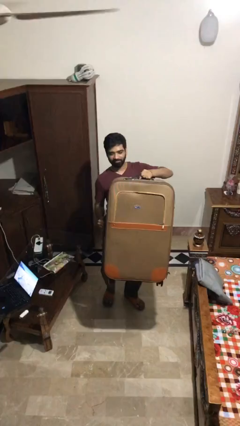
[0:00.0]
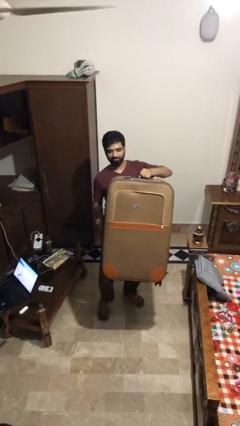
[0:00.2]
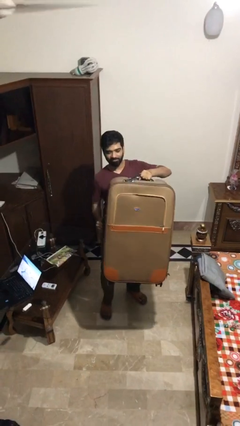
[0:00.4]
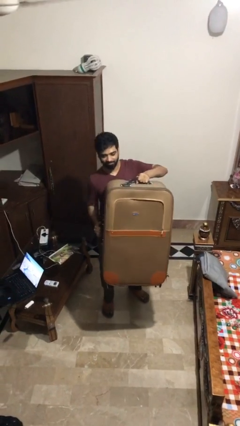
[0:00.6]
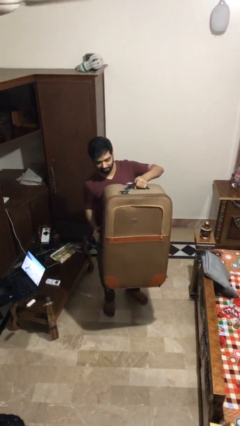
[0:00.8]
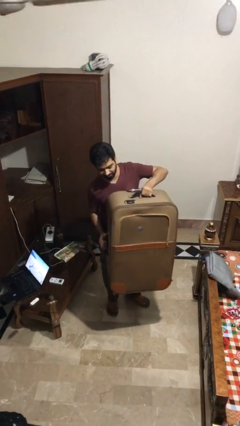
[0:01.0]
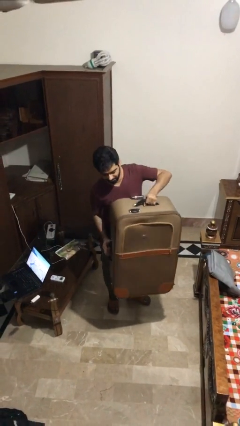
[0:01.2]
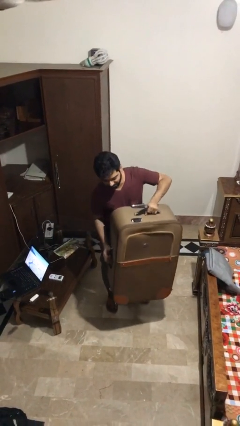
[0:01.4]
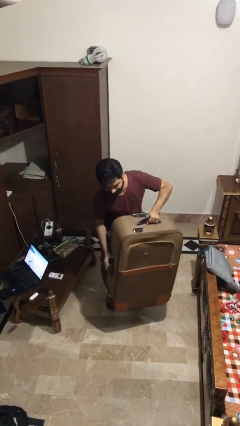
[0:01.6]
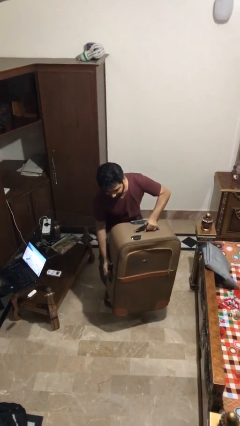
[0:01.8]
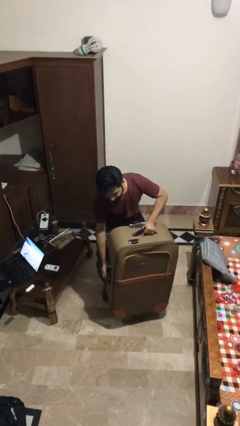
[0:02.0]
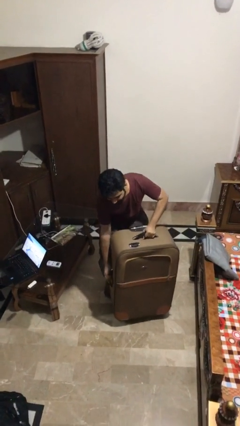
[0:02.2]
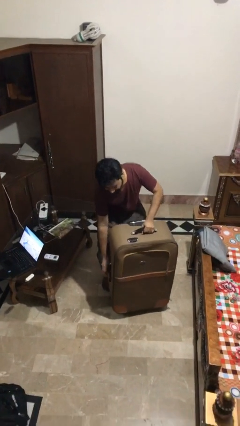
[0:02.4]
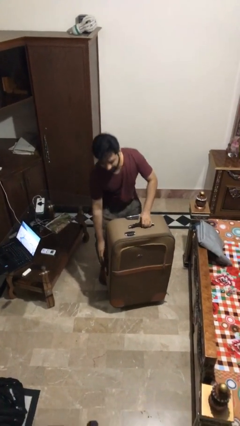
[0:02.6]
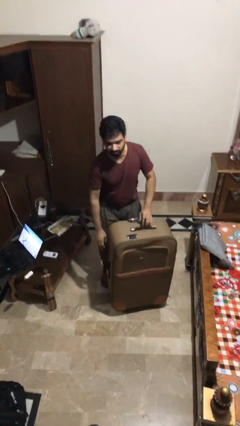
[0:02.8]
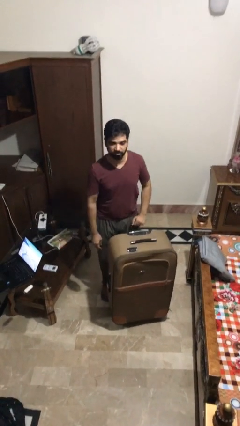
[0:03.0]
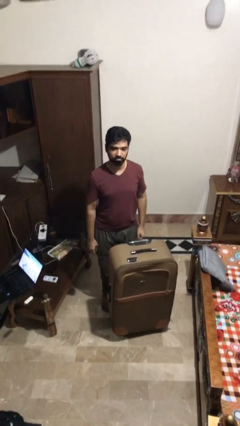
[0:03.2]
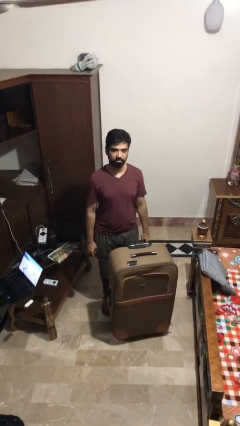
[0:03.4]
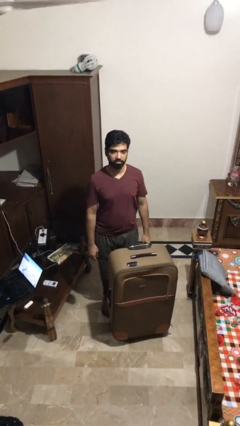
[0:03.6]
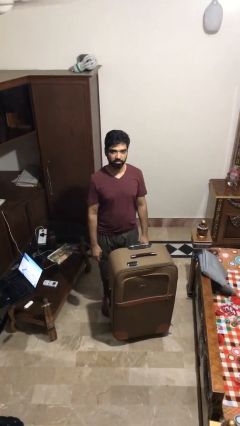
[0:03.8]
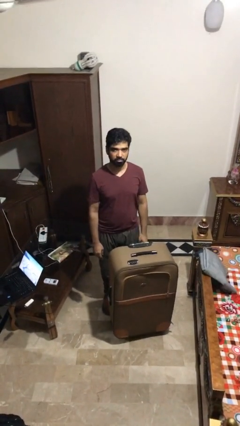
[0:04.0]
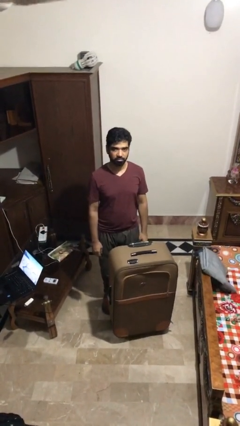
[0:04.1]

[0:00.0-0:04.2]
person puts down object on floor

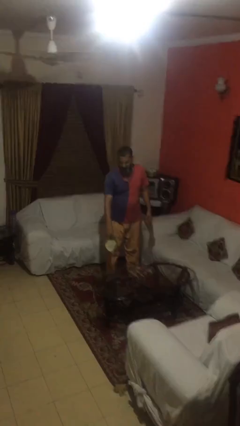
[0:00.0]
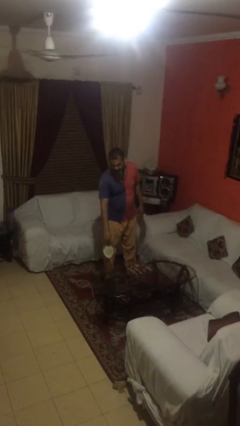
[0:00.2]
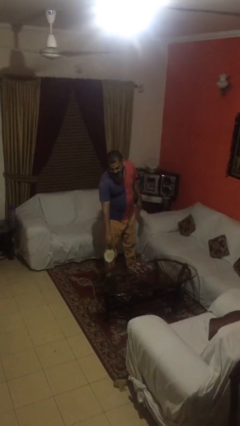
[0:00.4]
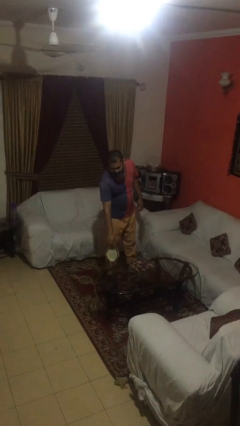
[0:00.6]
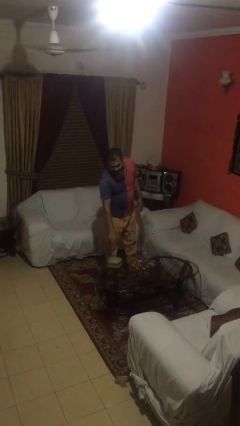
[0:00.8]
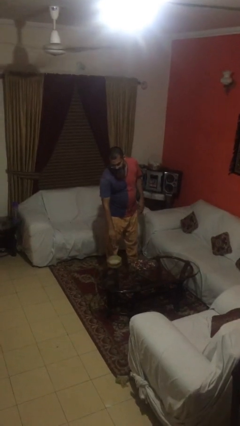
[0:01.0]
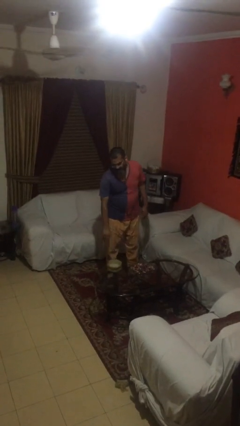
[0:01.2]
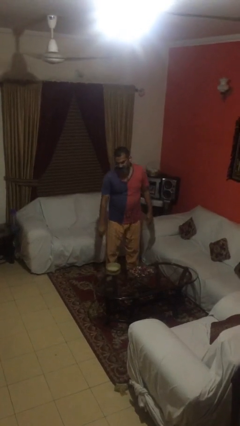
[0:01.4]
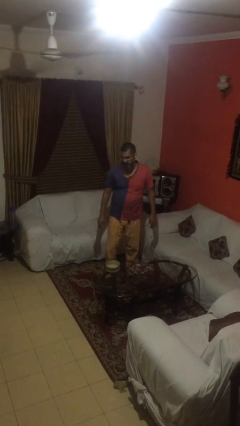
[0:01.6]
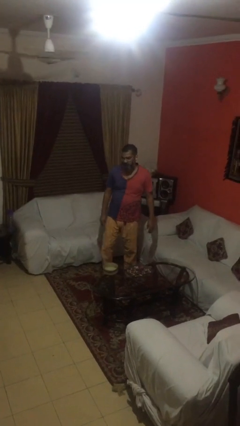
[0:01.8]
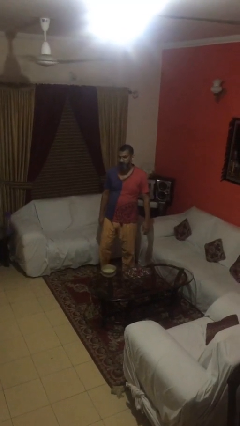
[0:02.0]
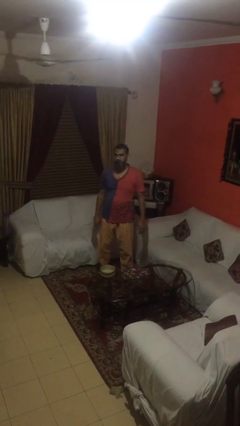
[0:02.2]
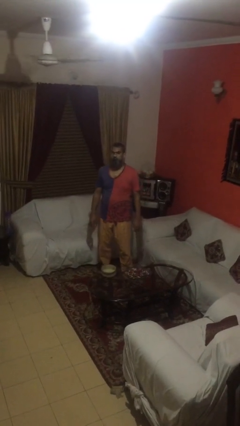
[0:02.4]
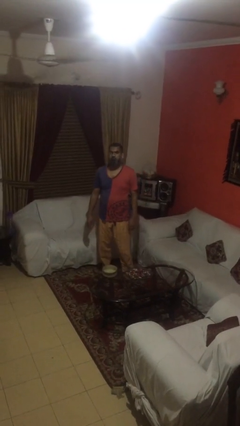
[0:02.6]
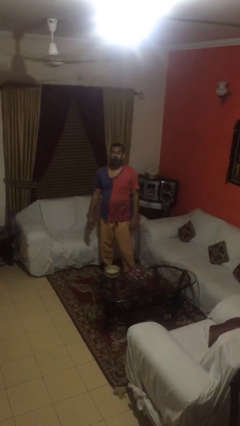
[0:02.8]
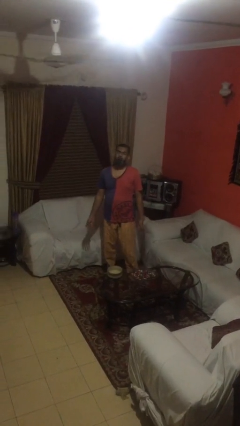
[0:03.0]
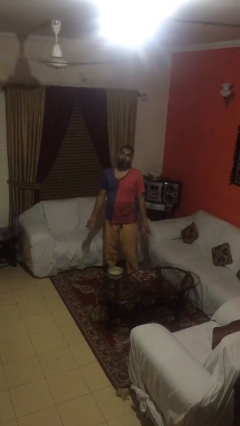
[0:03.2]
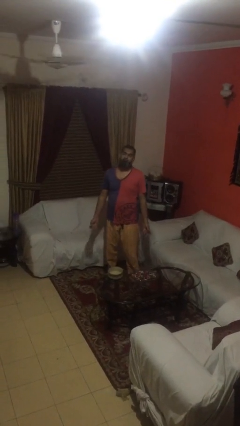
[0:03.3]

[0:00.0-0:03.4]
person puts down object on table

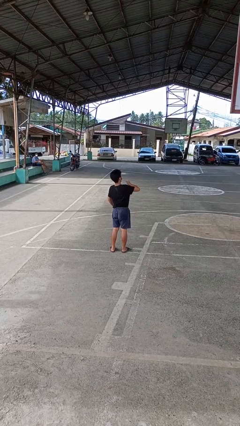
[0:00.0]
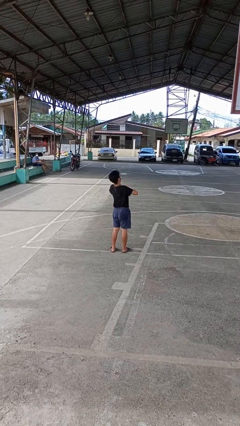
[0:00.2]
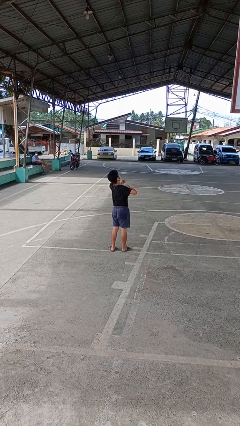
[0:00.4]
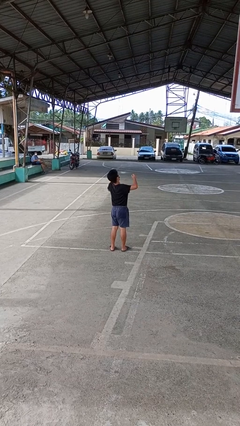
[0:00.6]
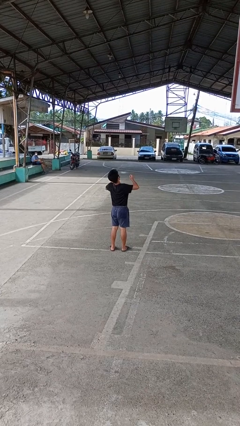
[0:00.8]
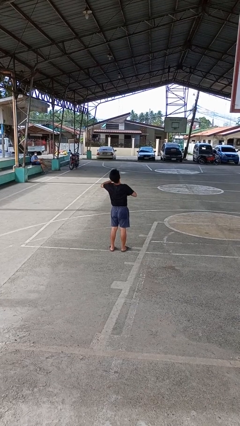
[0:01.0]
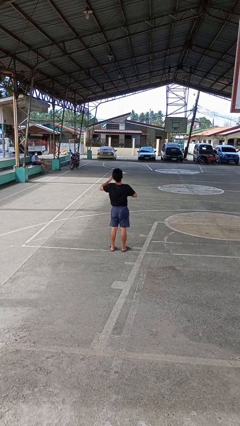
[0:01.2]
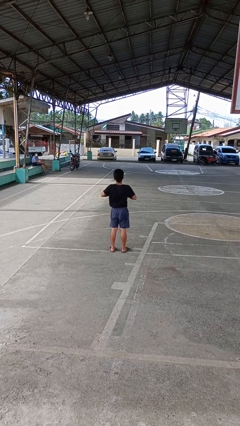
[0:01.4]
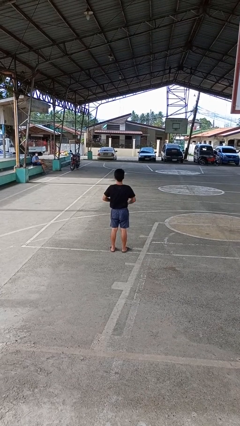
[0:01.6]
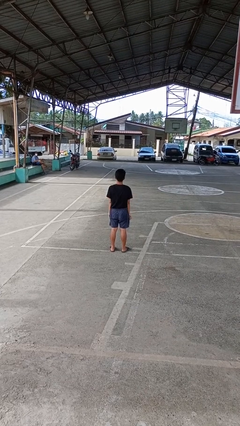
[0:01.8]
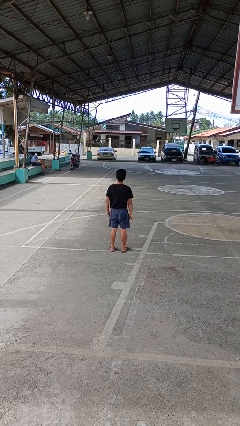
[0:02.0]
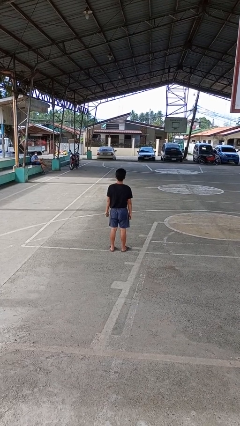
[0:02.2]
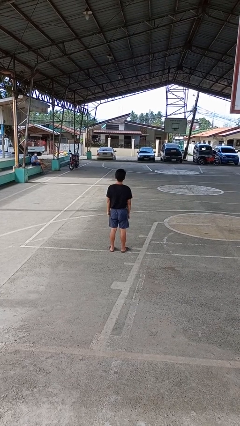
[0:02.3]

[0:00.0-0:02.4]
person drums on chest

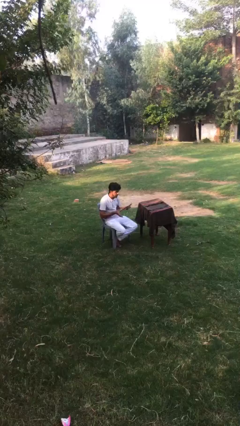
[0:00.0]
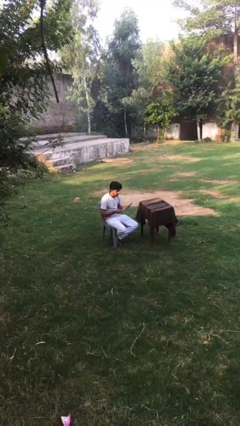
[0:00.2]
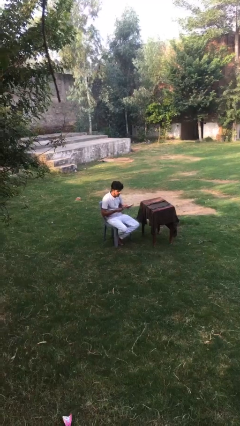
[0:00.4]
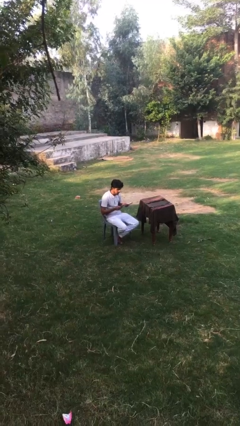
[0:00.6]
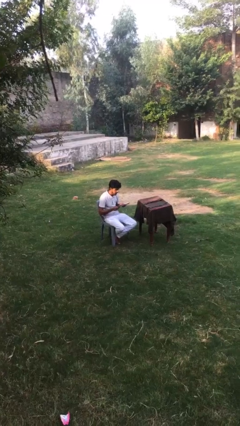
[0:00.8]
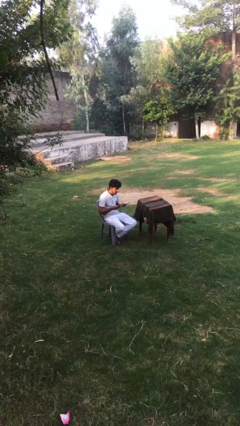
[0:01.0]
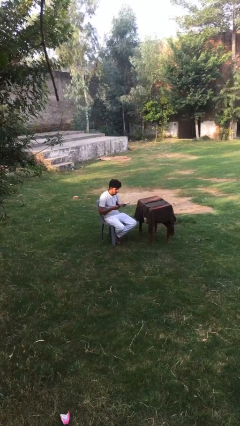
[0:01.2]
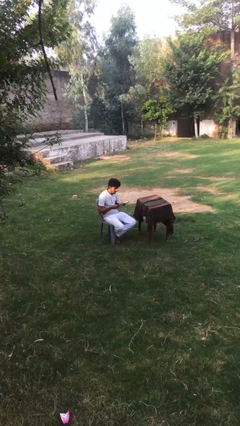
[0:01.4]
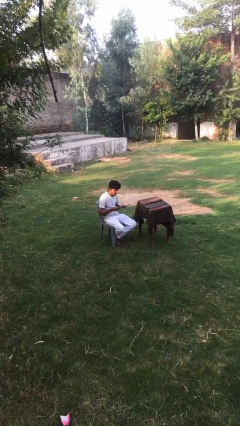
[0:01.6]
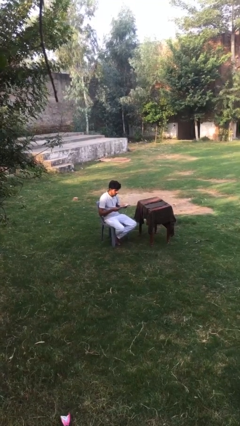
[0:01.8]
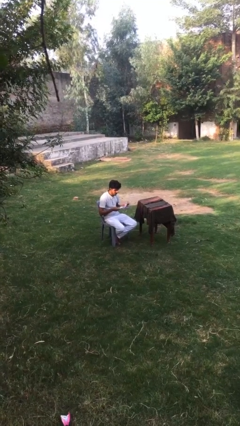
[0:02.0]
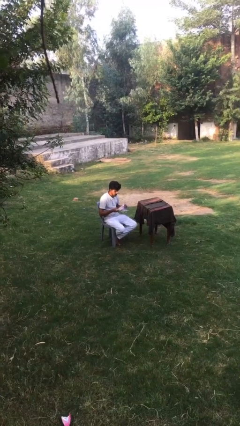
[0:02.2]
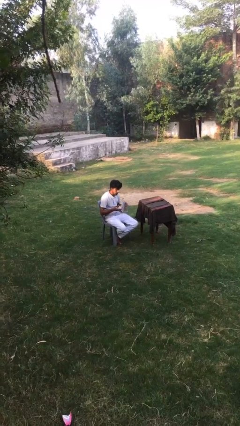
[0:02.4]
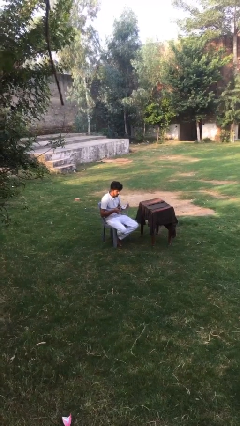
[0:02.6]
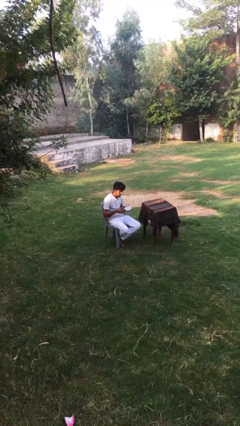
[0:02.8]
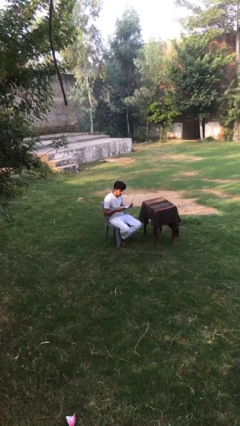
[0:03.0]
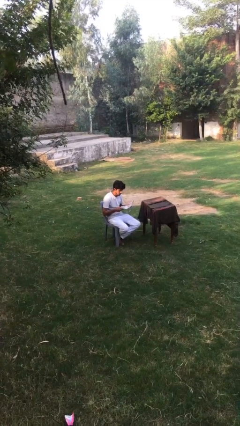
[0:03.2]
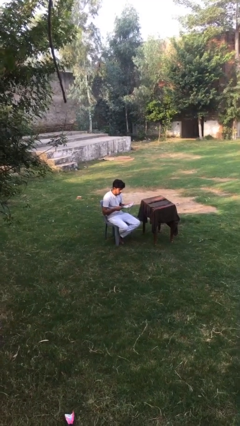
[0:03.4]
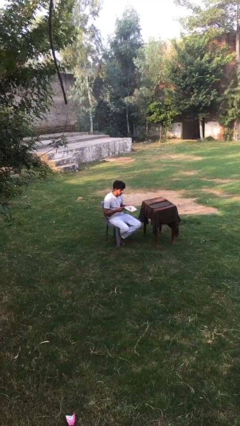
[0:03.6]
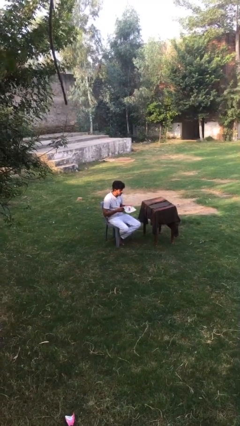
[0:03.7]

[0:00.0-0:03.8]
person reads document

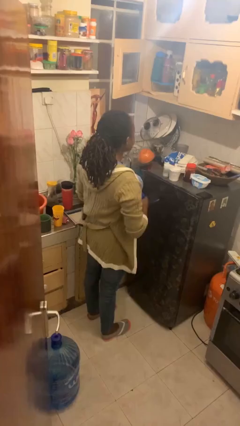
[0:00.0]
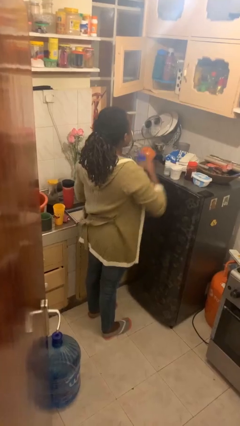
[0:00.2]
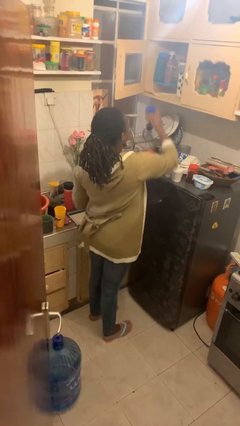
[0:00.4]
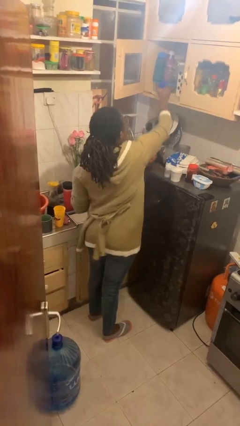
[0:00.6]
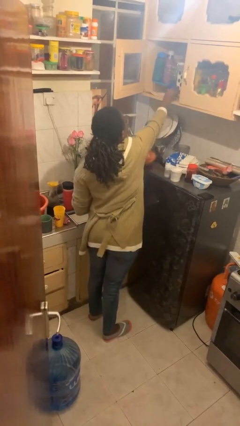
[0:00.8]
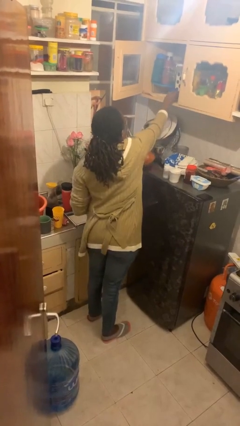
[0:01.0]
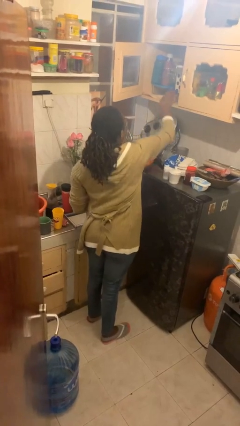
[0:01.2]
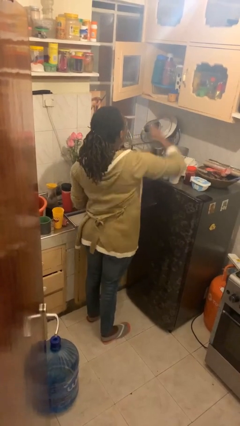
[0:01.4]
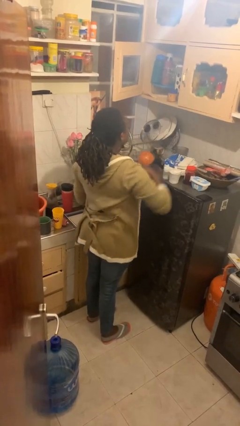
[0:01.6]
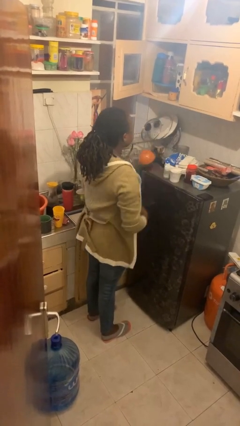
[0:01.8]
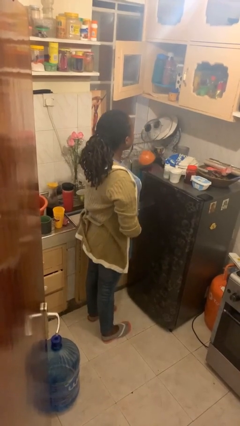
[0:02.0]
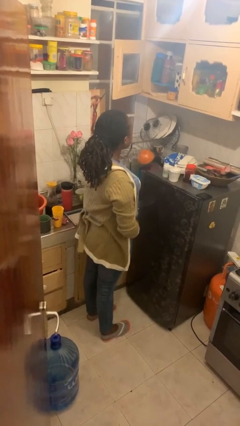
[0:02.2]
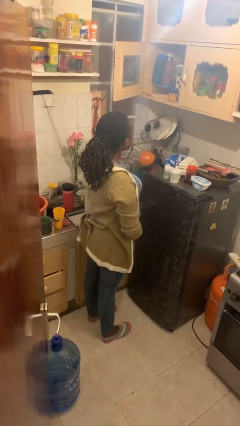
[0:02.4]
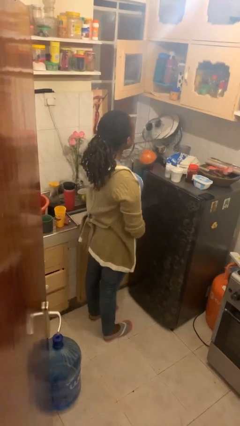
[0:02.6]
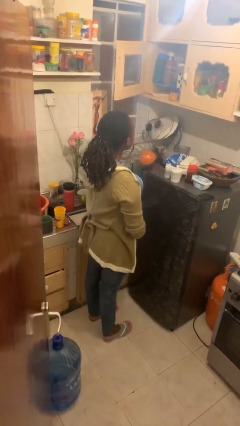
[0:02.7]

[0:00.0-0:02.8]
person puts down object on countertop

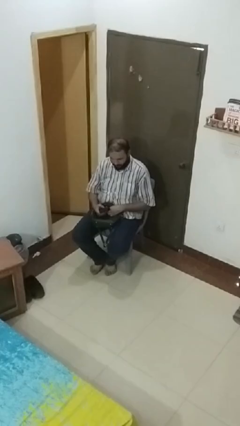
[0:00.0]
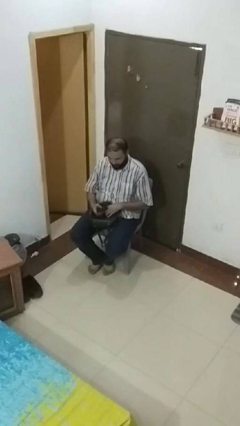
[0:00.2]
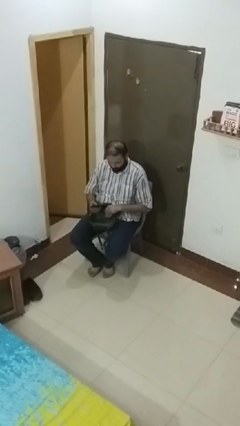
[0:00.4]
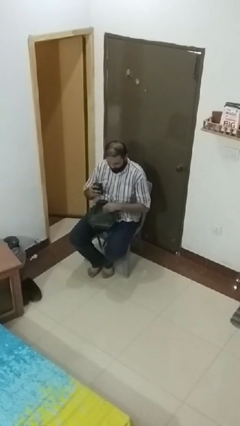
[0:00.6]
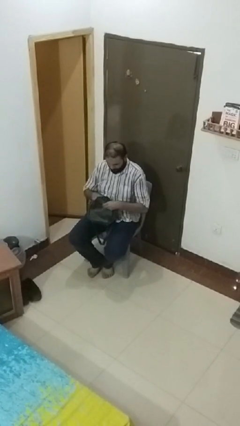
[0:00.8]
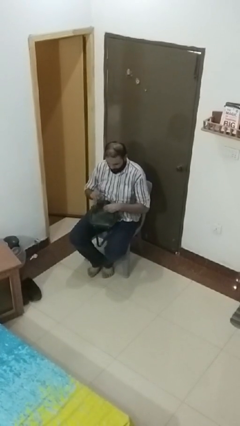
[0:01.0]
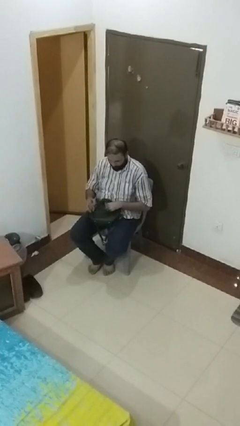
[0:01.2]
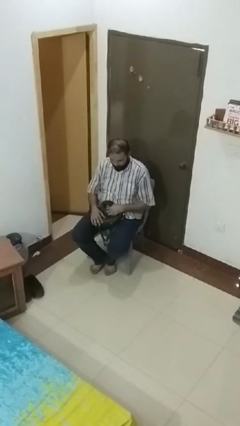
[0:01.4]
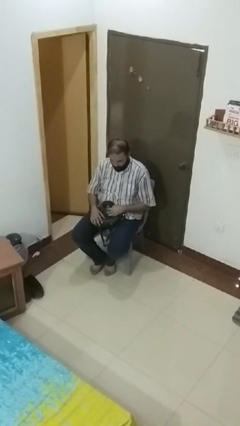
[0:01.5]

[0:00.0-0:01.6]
person puts object into purse
